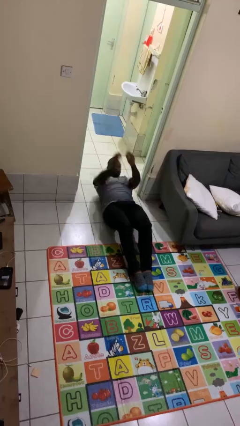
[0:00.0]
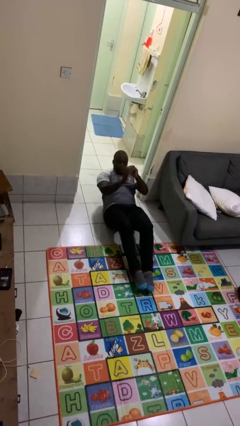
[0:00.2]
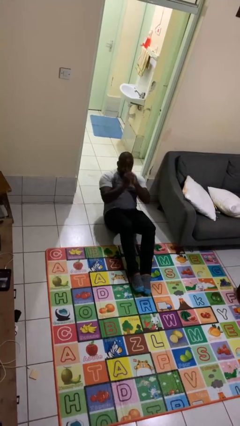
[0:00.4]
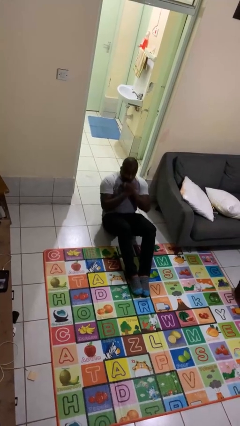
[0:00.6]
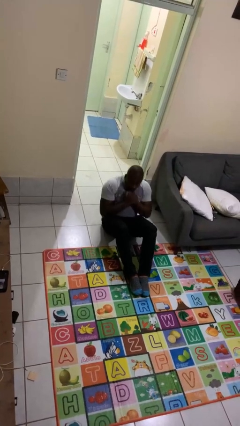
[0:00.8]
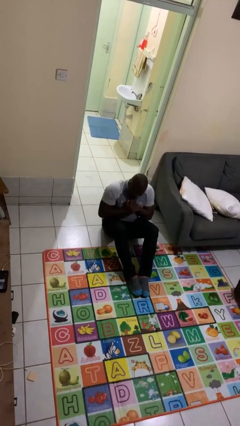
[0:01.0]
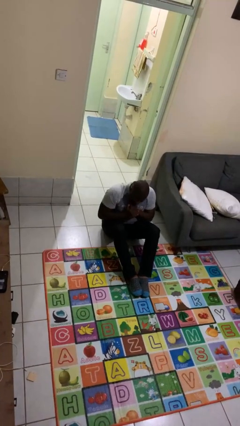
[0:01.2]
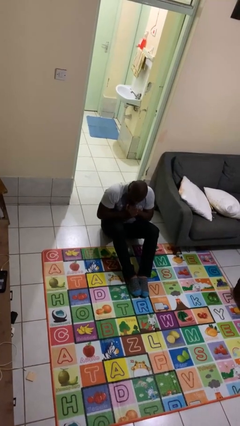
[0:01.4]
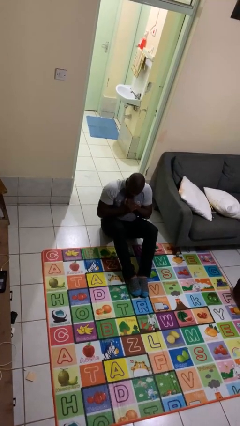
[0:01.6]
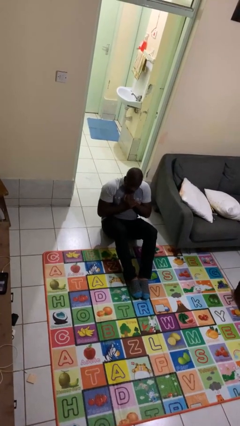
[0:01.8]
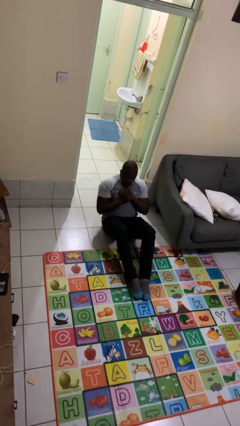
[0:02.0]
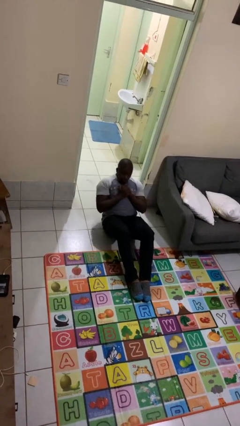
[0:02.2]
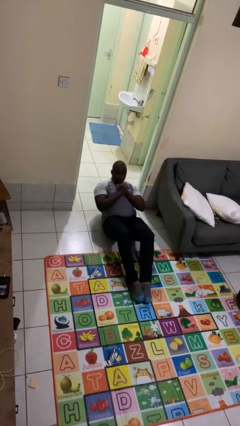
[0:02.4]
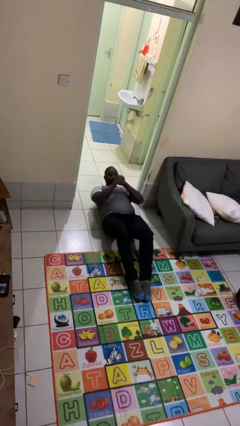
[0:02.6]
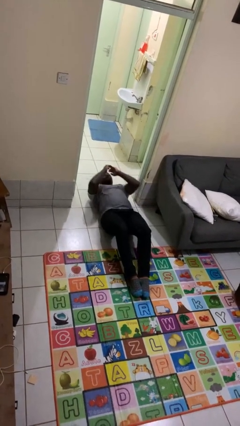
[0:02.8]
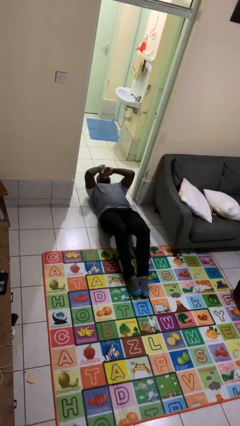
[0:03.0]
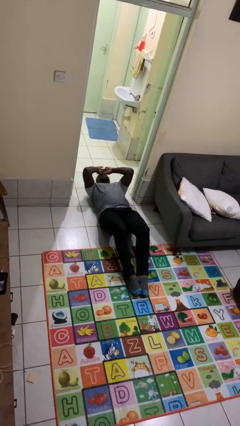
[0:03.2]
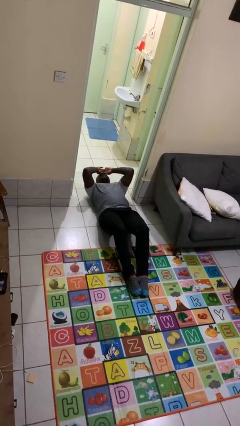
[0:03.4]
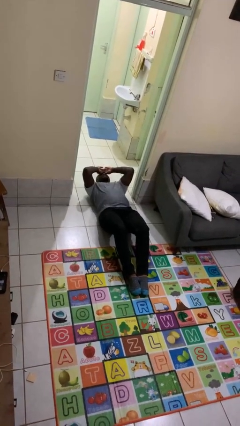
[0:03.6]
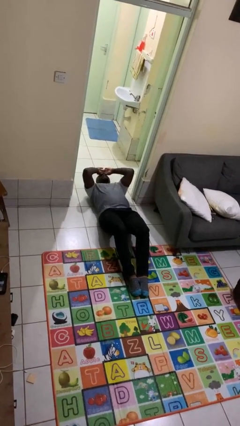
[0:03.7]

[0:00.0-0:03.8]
person exercises with situp

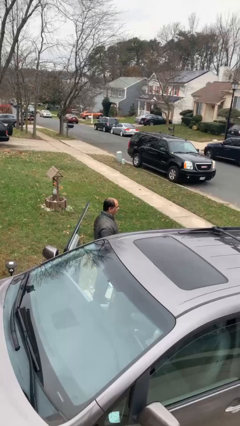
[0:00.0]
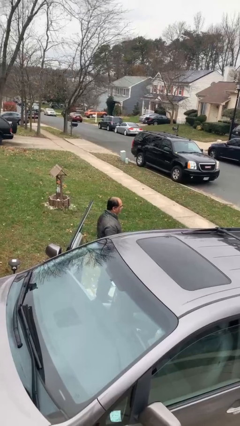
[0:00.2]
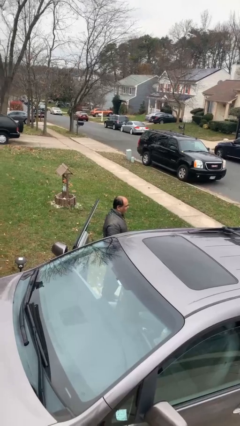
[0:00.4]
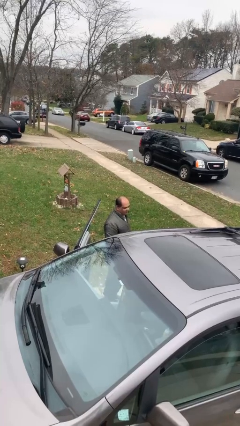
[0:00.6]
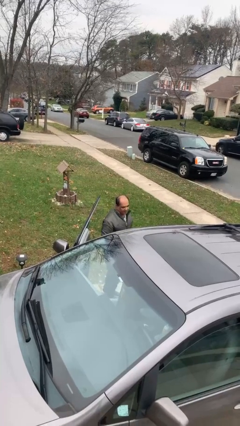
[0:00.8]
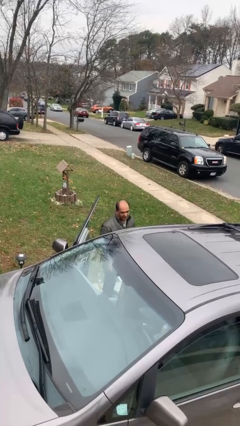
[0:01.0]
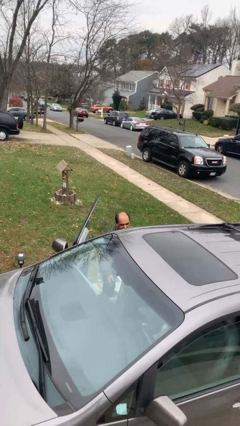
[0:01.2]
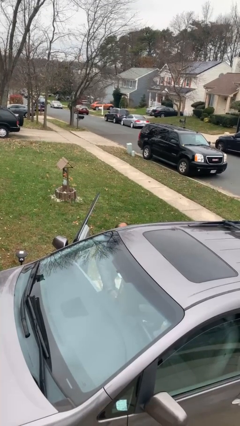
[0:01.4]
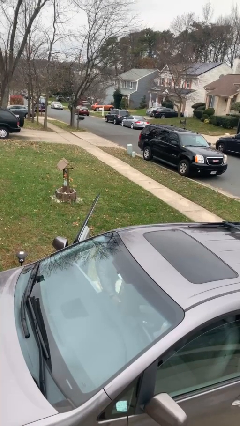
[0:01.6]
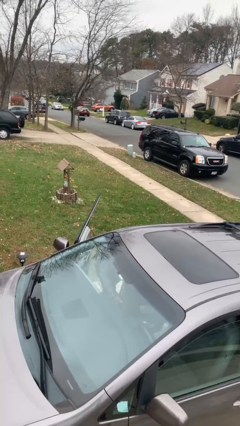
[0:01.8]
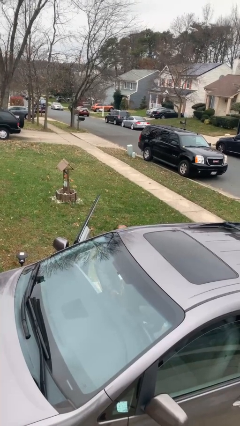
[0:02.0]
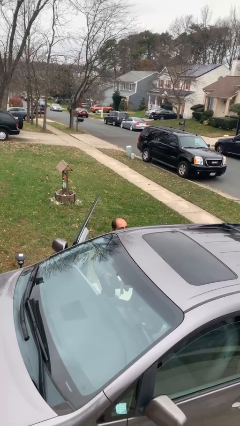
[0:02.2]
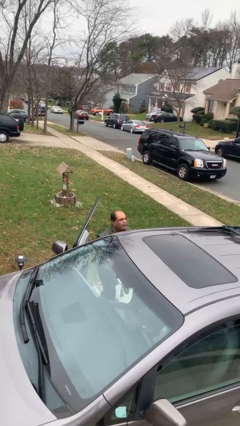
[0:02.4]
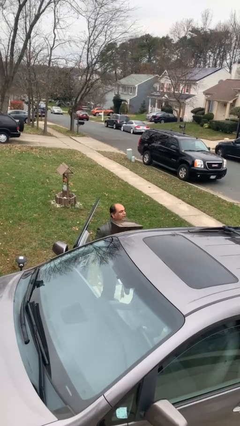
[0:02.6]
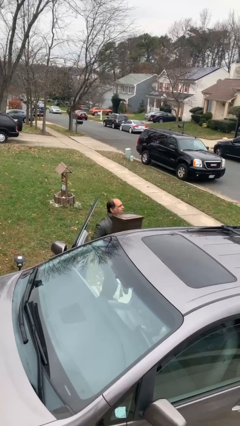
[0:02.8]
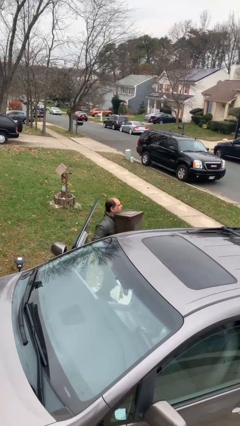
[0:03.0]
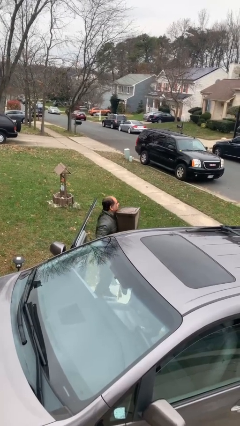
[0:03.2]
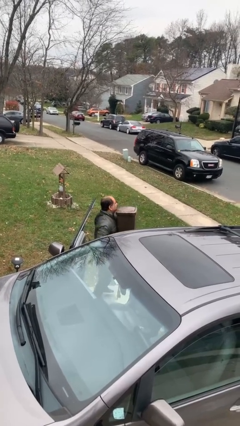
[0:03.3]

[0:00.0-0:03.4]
person unloads car

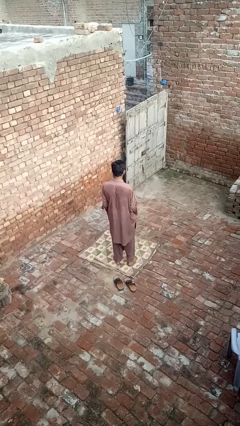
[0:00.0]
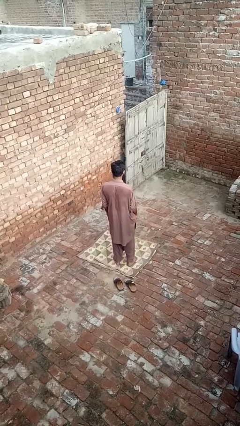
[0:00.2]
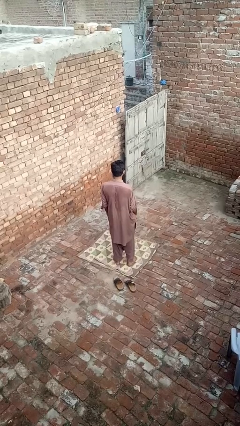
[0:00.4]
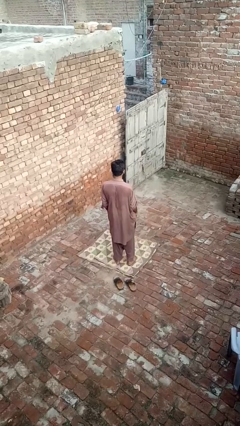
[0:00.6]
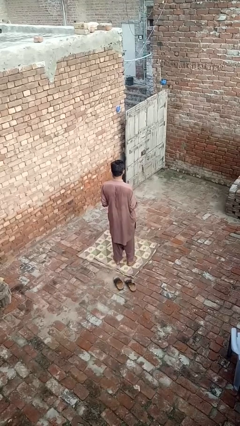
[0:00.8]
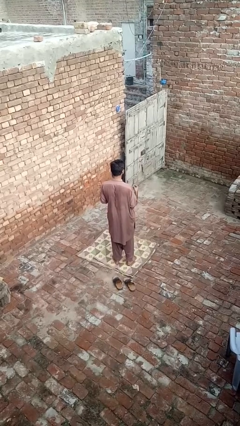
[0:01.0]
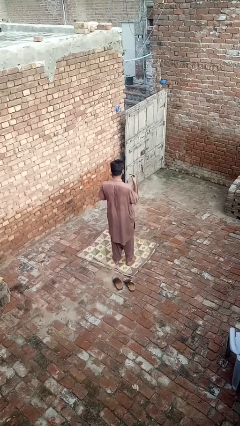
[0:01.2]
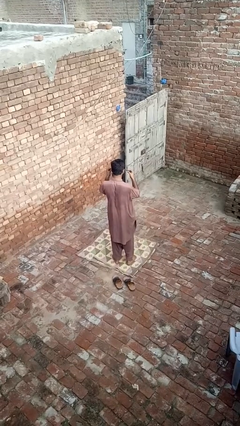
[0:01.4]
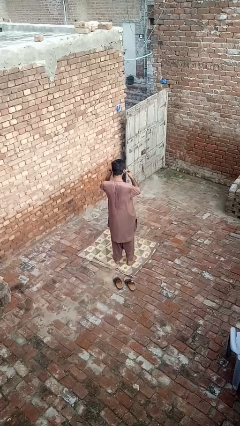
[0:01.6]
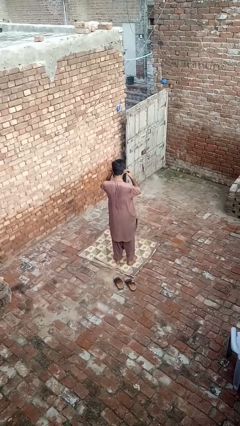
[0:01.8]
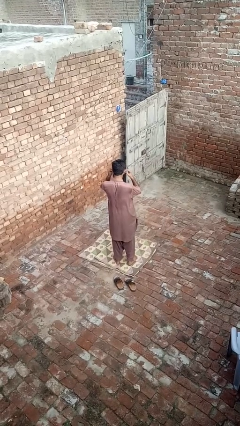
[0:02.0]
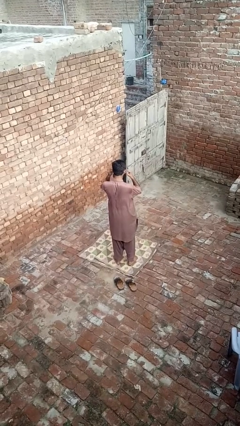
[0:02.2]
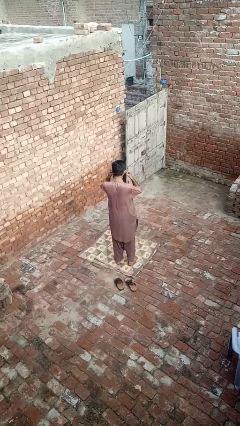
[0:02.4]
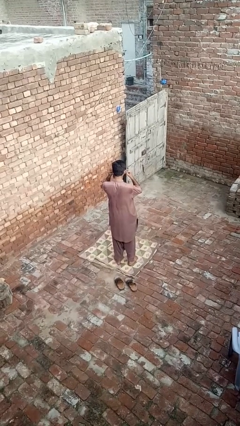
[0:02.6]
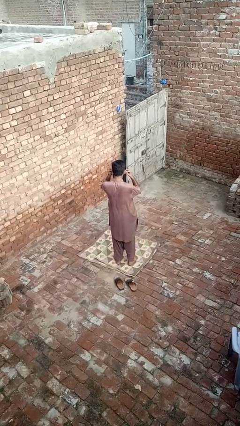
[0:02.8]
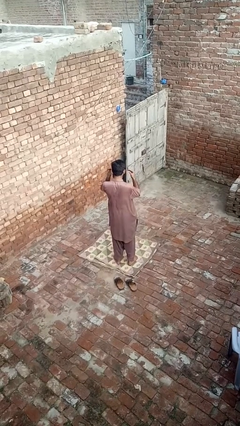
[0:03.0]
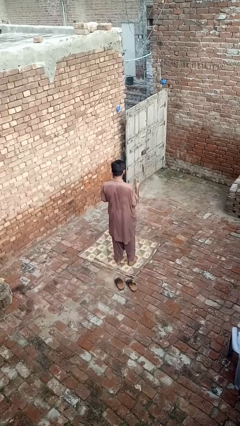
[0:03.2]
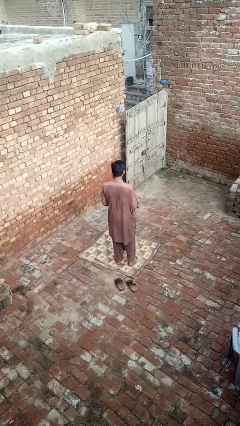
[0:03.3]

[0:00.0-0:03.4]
person puts on headphones

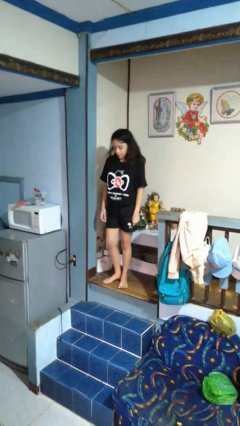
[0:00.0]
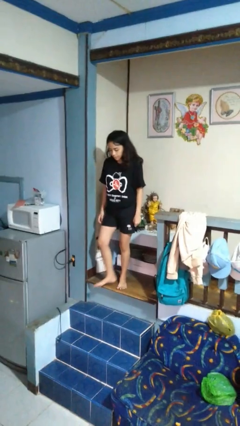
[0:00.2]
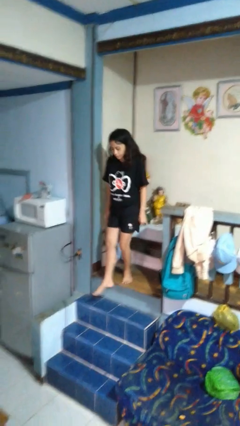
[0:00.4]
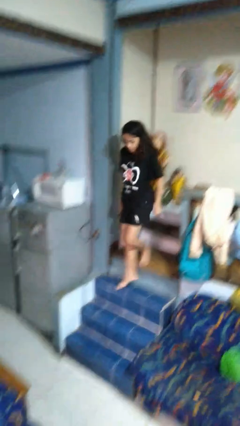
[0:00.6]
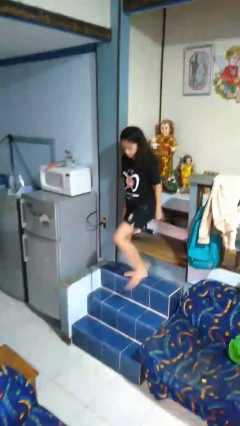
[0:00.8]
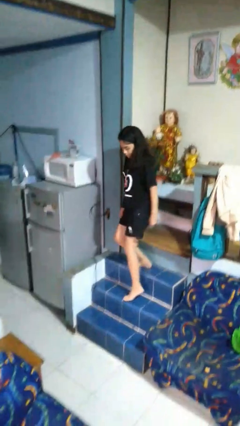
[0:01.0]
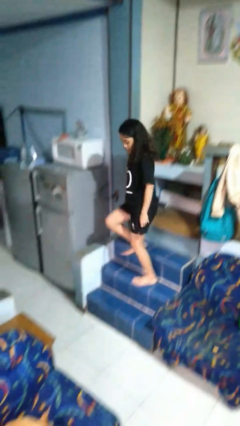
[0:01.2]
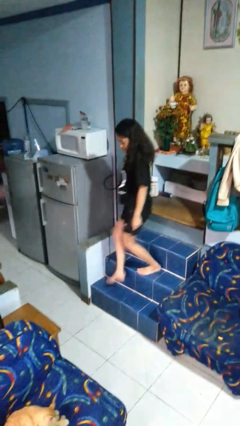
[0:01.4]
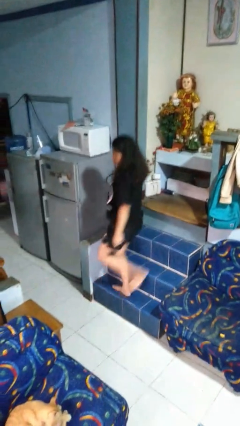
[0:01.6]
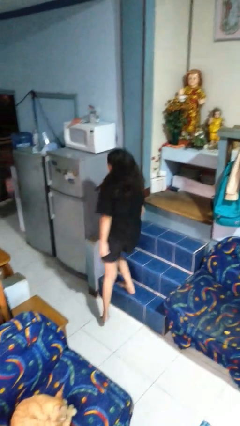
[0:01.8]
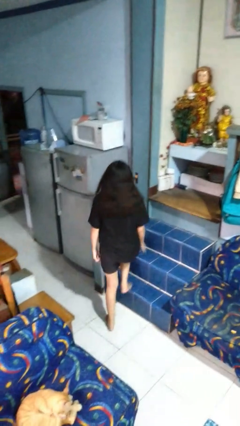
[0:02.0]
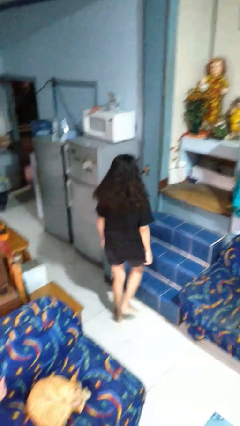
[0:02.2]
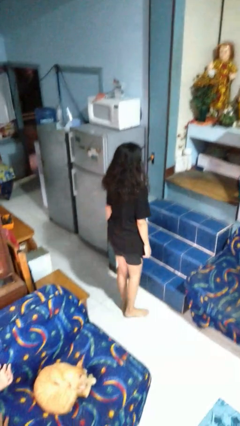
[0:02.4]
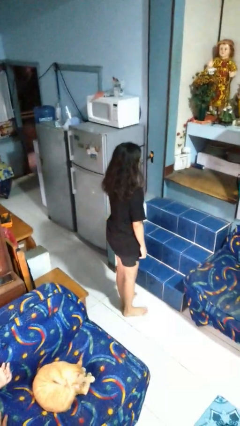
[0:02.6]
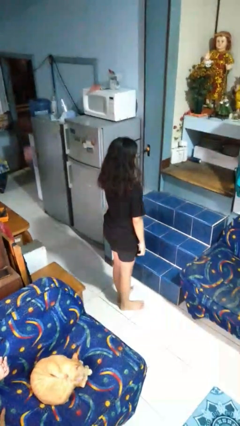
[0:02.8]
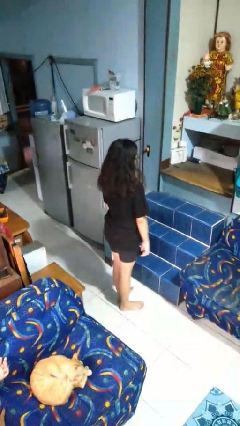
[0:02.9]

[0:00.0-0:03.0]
person climbs down stairs

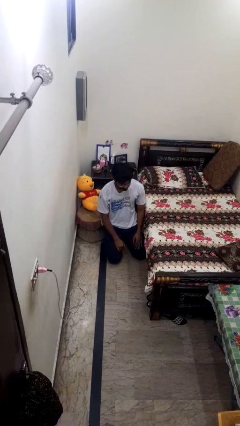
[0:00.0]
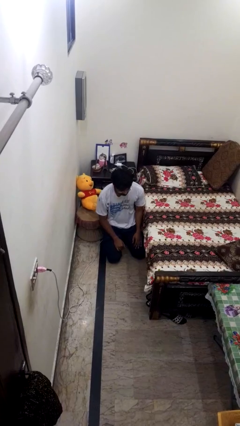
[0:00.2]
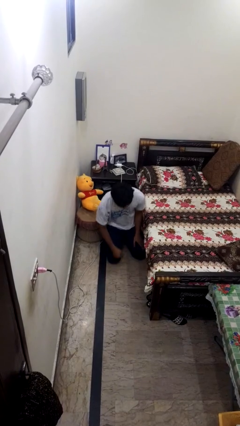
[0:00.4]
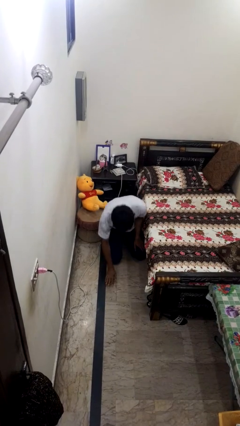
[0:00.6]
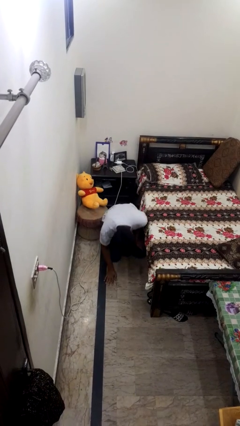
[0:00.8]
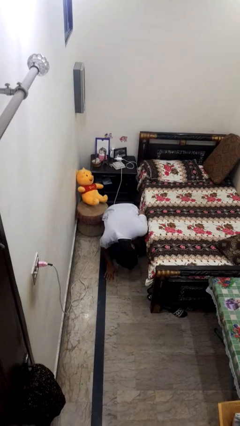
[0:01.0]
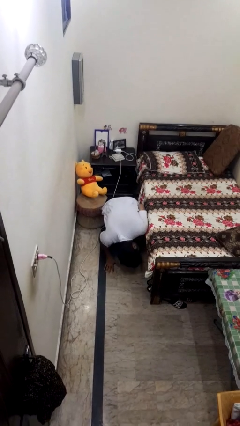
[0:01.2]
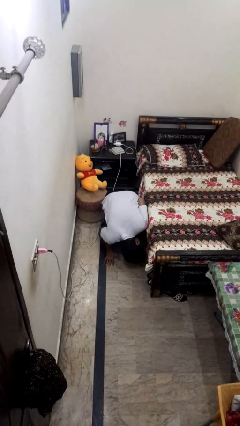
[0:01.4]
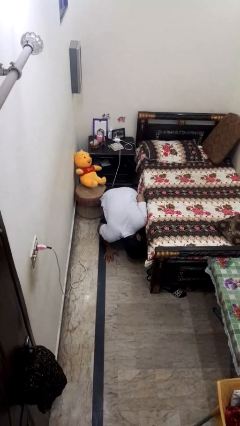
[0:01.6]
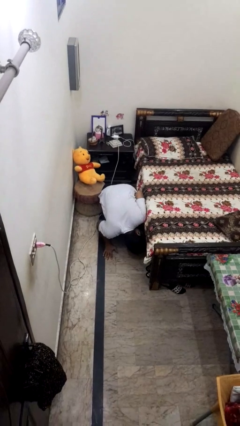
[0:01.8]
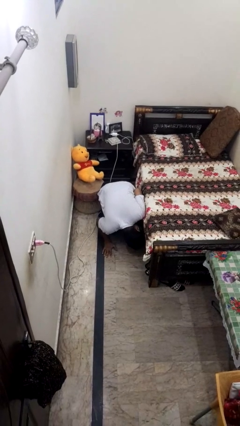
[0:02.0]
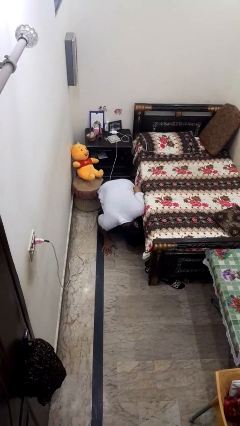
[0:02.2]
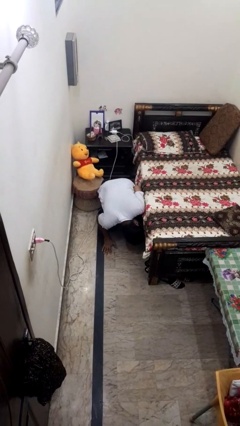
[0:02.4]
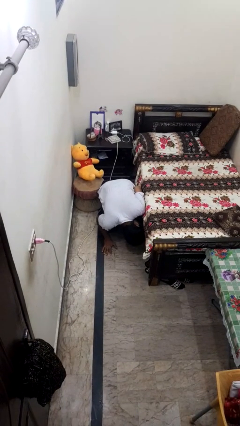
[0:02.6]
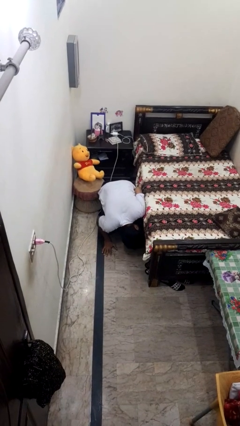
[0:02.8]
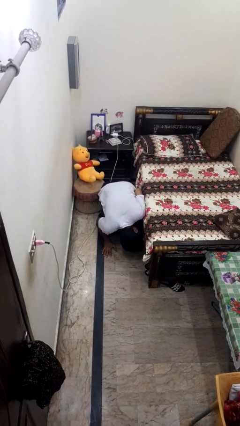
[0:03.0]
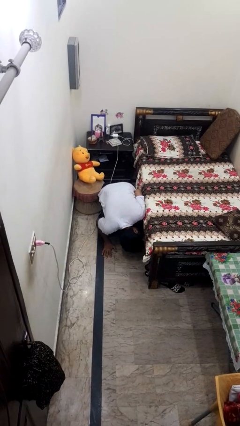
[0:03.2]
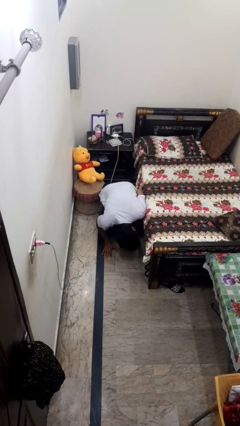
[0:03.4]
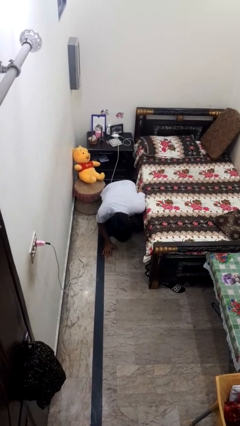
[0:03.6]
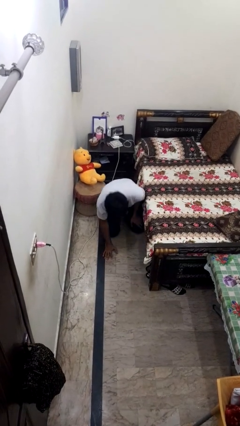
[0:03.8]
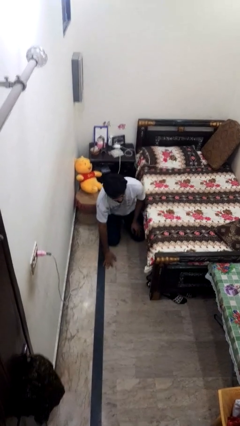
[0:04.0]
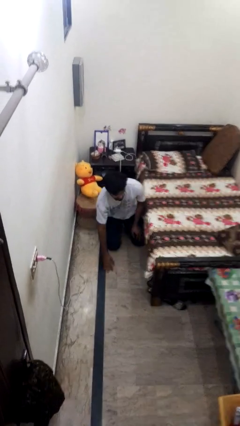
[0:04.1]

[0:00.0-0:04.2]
person searches under bed
